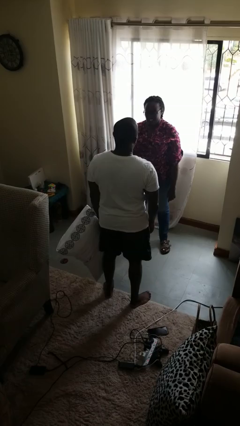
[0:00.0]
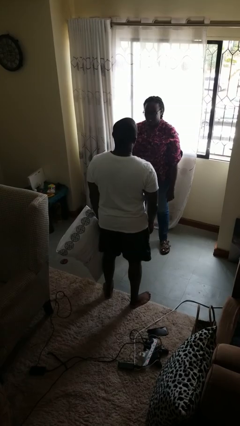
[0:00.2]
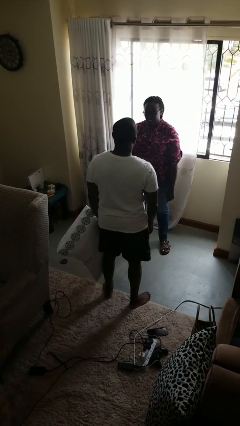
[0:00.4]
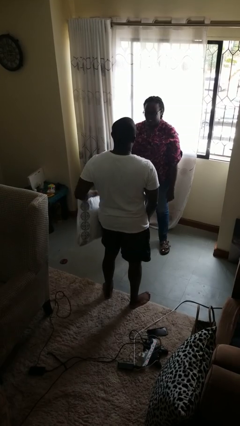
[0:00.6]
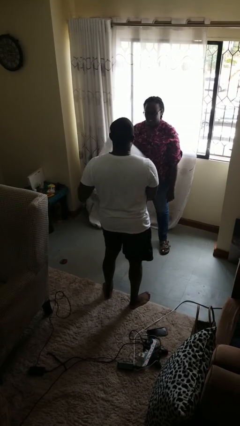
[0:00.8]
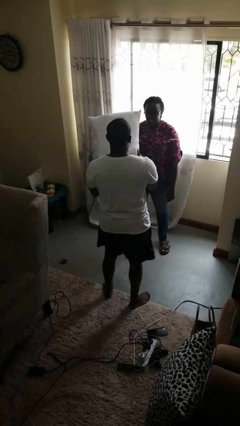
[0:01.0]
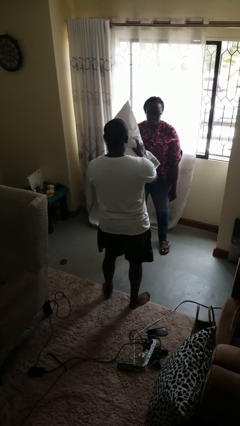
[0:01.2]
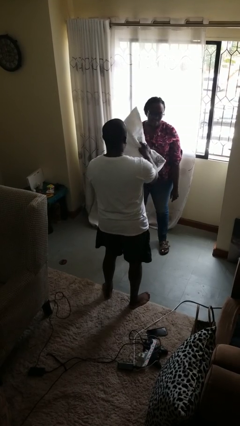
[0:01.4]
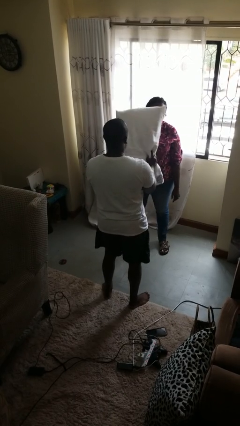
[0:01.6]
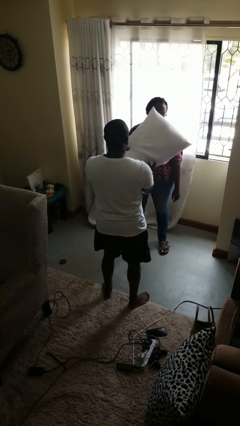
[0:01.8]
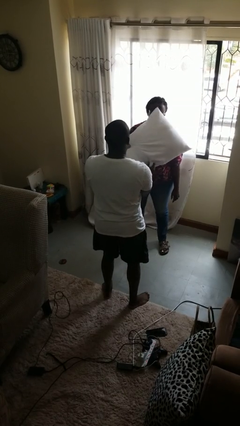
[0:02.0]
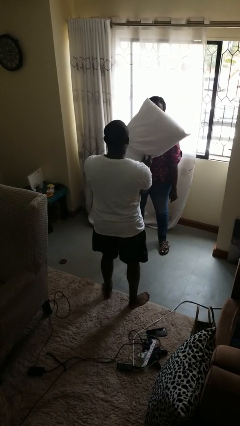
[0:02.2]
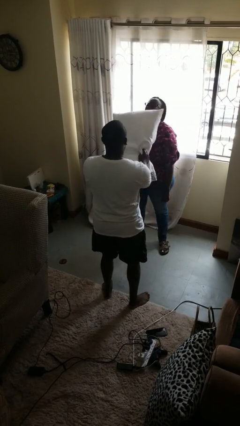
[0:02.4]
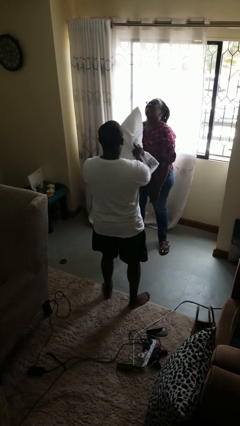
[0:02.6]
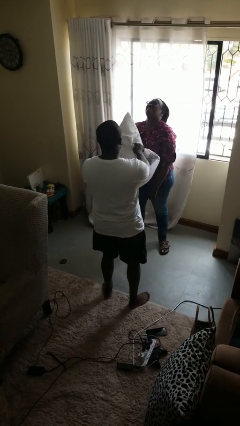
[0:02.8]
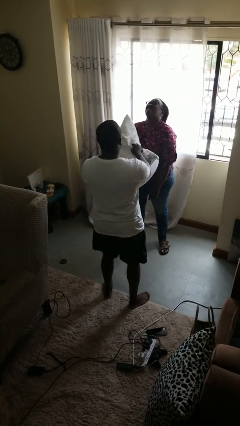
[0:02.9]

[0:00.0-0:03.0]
person hits person with pillow

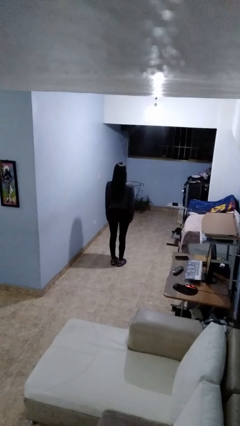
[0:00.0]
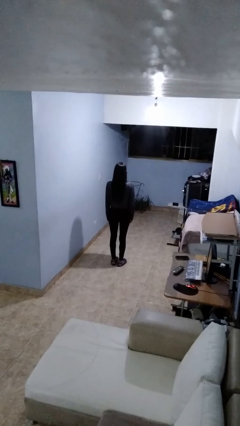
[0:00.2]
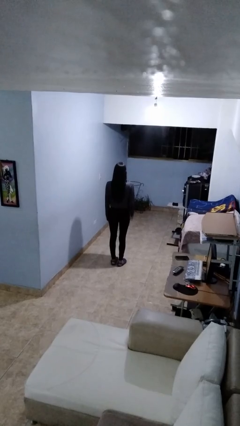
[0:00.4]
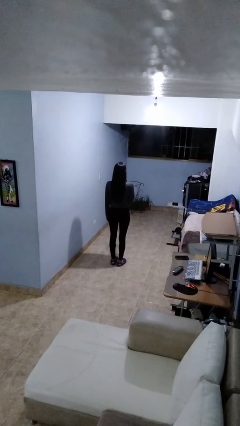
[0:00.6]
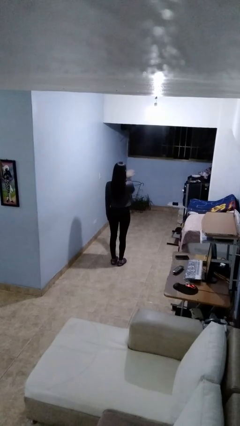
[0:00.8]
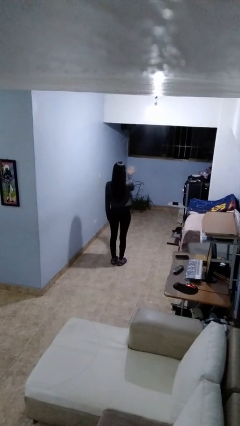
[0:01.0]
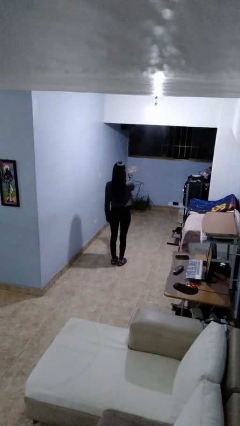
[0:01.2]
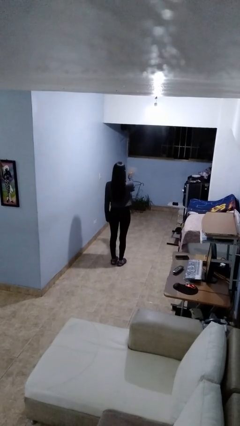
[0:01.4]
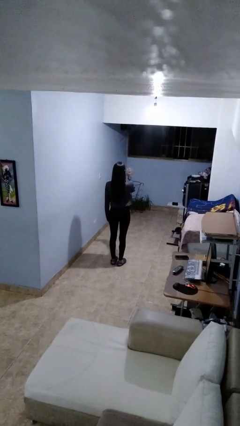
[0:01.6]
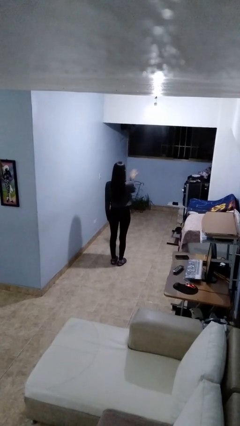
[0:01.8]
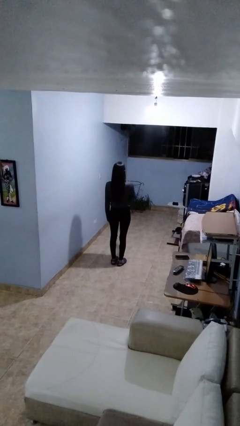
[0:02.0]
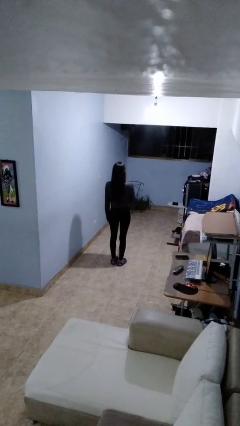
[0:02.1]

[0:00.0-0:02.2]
person salutes

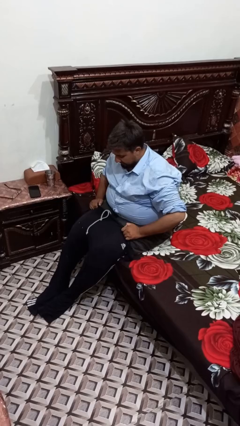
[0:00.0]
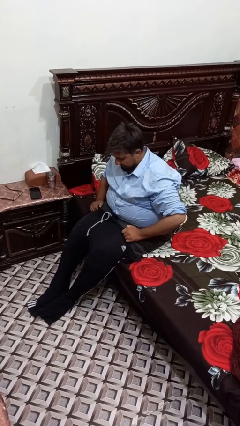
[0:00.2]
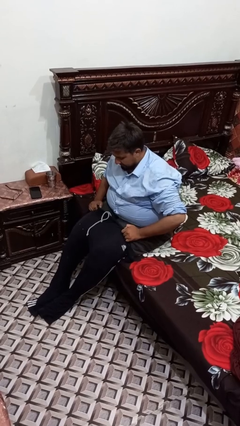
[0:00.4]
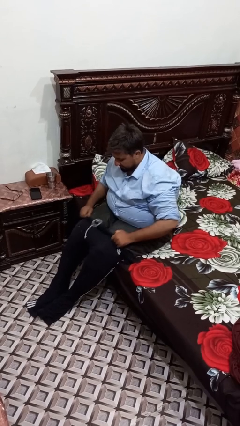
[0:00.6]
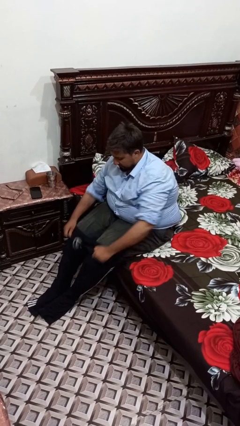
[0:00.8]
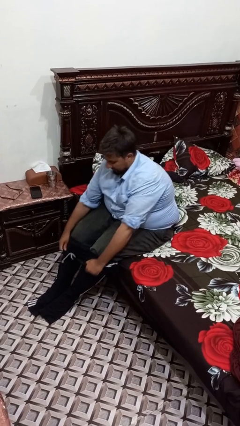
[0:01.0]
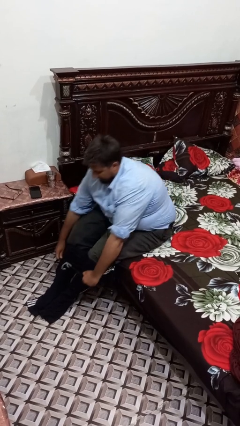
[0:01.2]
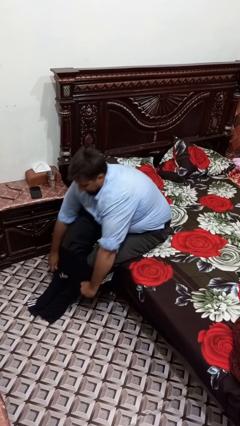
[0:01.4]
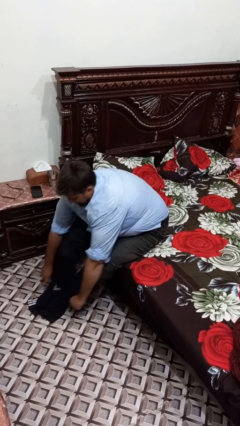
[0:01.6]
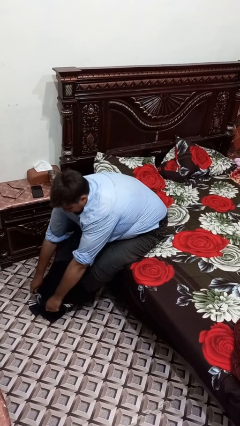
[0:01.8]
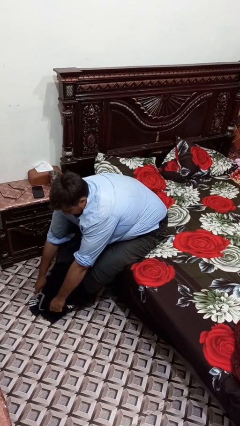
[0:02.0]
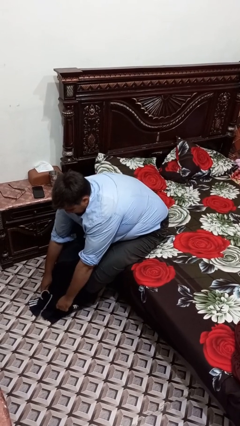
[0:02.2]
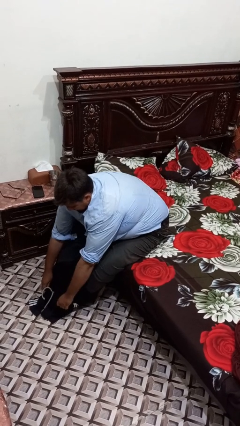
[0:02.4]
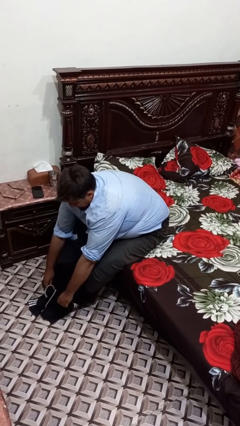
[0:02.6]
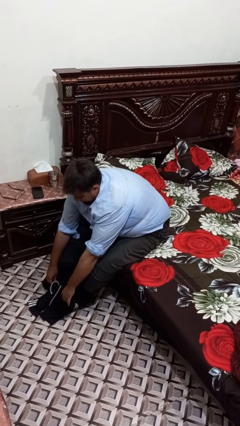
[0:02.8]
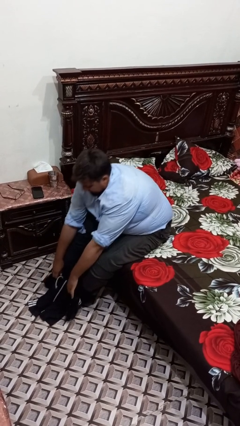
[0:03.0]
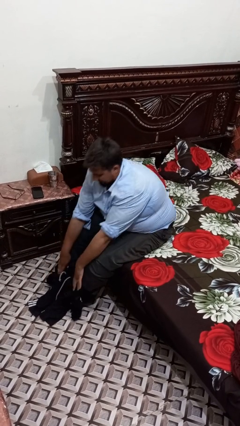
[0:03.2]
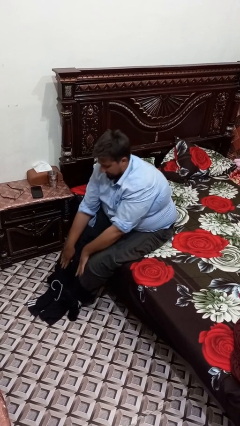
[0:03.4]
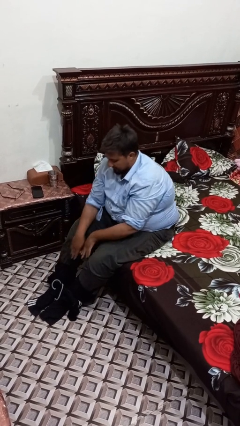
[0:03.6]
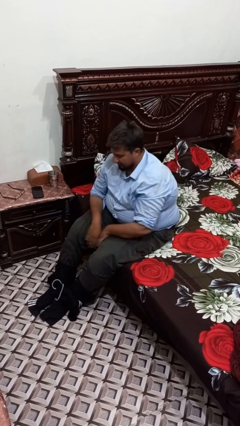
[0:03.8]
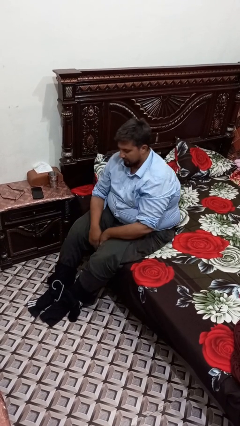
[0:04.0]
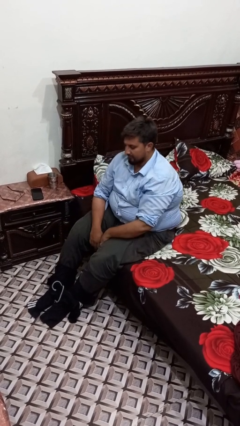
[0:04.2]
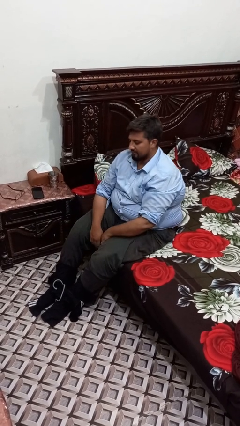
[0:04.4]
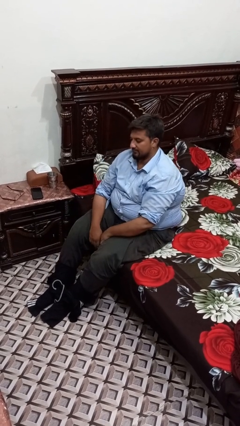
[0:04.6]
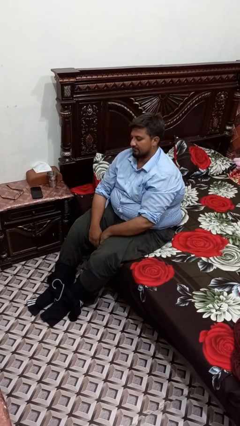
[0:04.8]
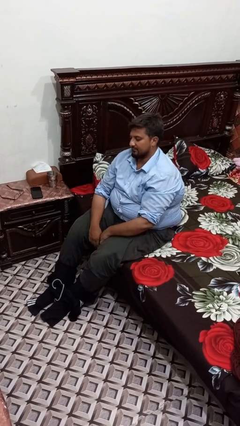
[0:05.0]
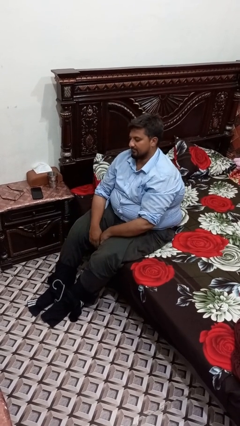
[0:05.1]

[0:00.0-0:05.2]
person takes off pants

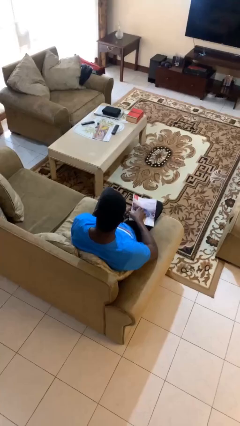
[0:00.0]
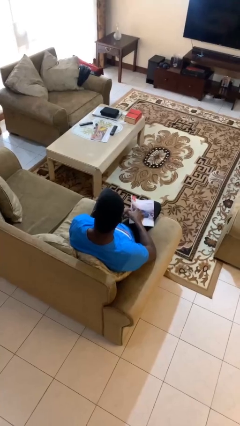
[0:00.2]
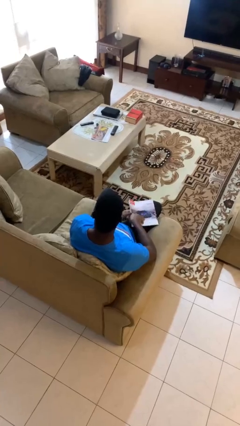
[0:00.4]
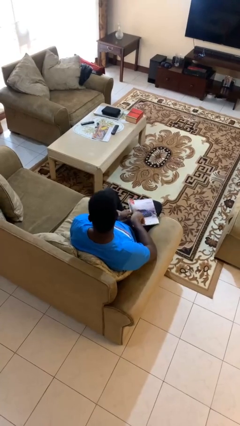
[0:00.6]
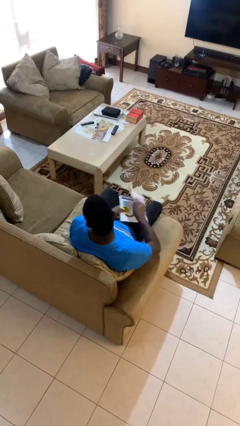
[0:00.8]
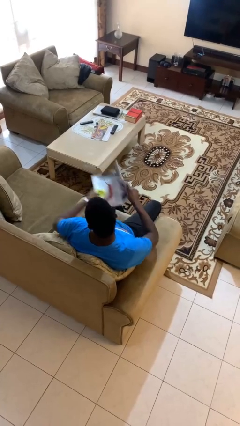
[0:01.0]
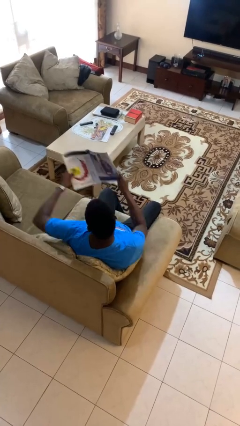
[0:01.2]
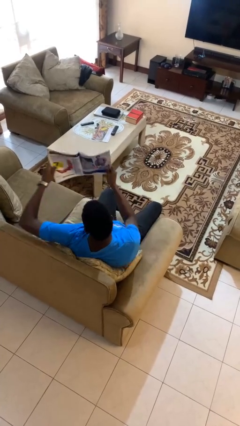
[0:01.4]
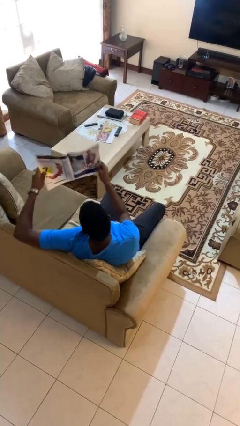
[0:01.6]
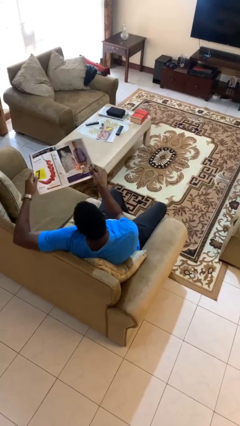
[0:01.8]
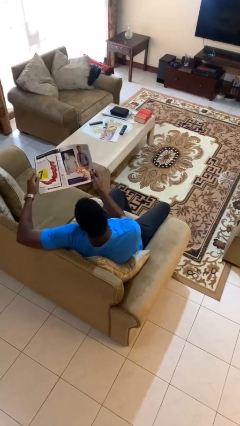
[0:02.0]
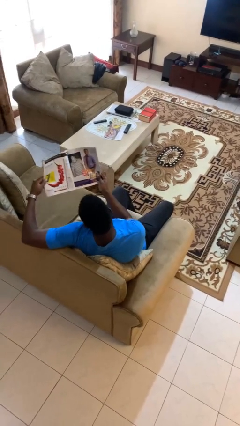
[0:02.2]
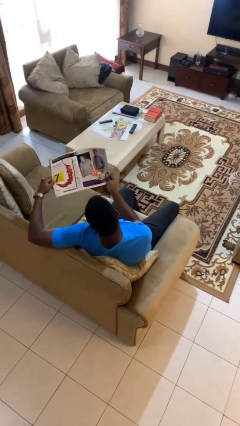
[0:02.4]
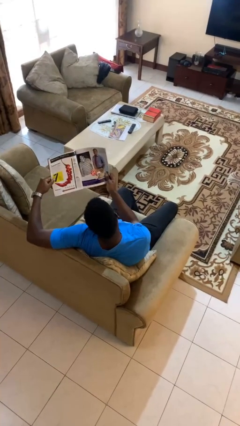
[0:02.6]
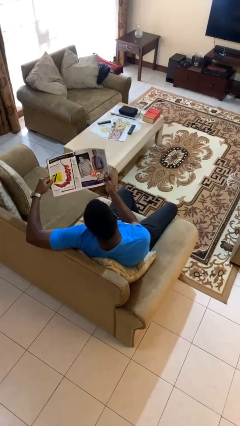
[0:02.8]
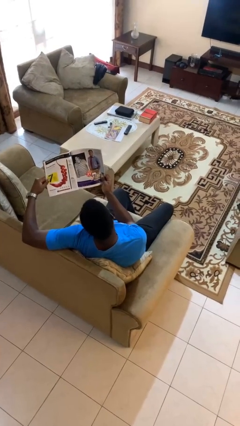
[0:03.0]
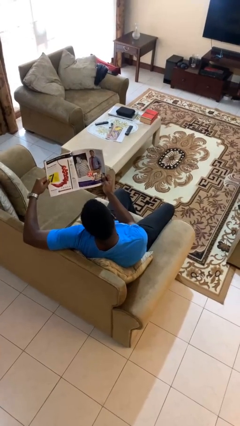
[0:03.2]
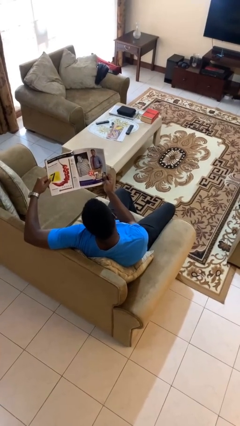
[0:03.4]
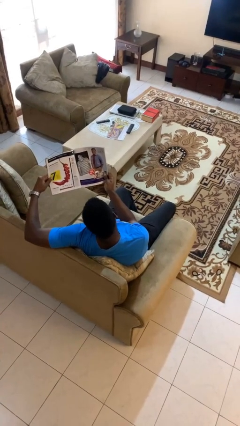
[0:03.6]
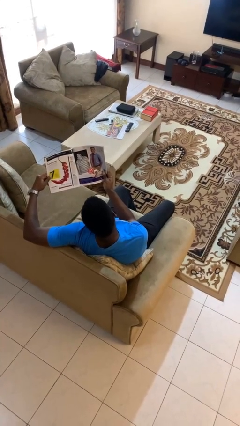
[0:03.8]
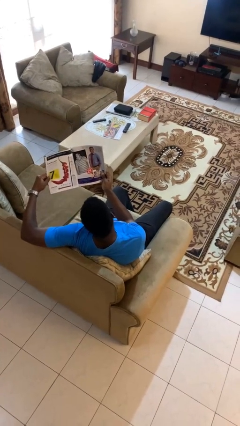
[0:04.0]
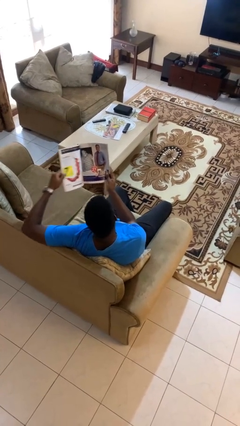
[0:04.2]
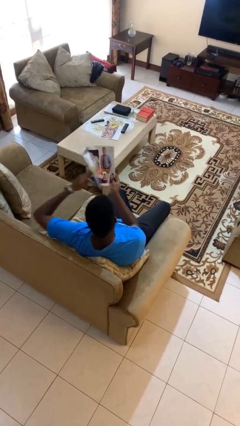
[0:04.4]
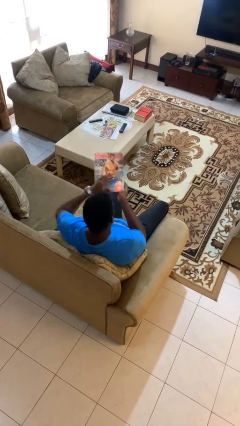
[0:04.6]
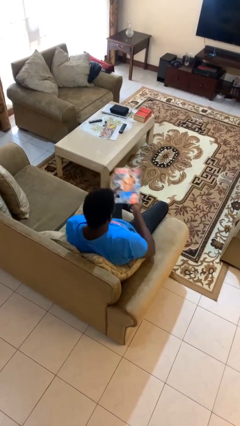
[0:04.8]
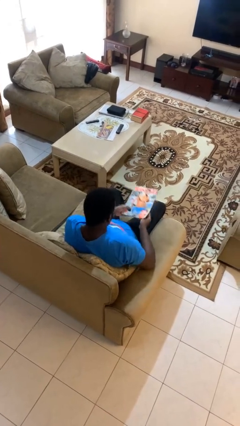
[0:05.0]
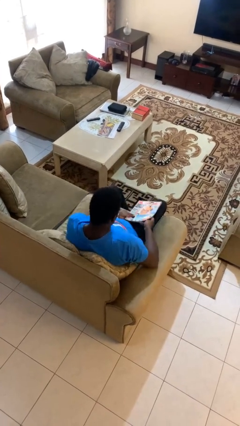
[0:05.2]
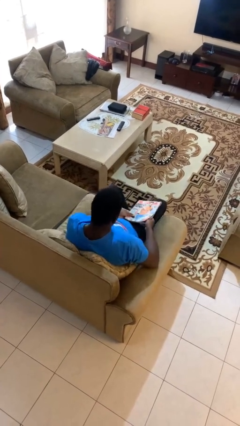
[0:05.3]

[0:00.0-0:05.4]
person reads magazine

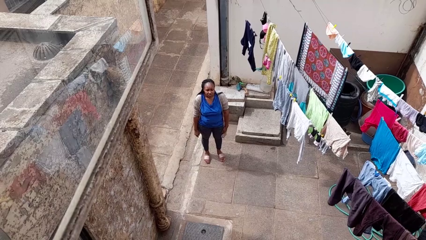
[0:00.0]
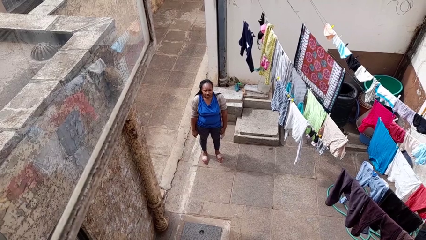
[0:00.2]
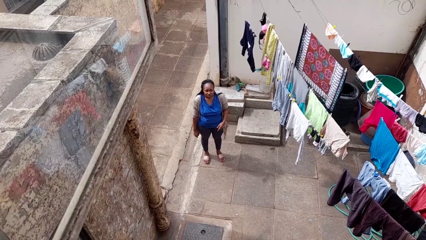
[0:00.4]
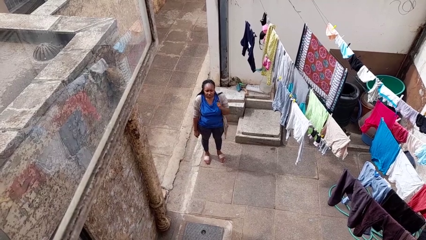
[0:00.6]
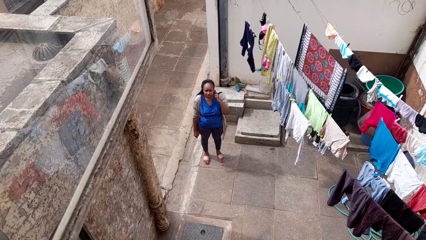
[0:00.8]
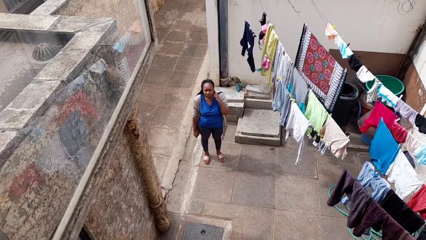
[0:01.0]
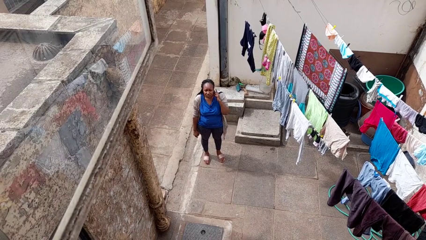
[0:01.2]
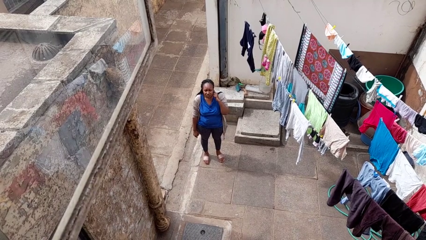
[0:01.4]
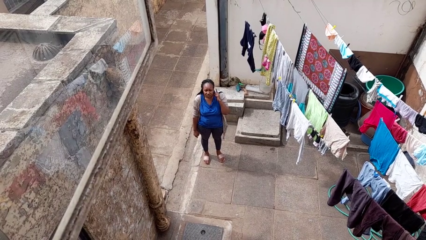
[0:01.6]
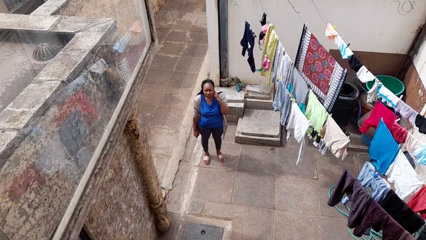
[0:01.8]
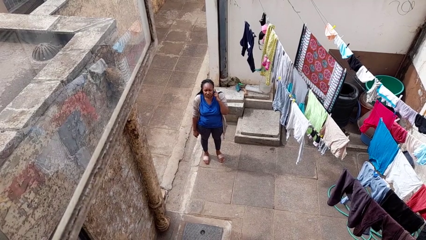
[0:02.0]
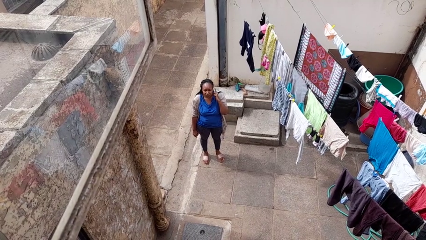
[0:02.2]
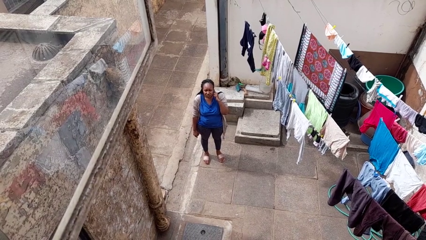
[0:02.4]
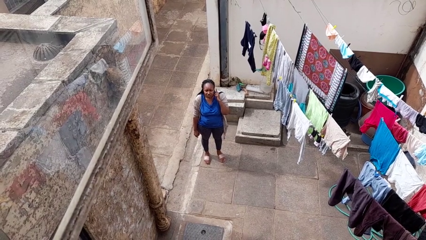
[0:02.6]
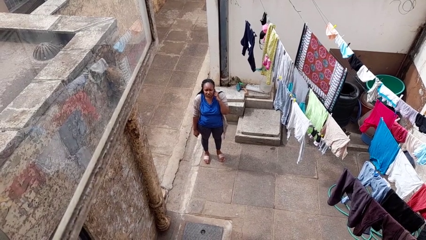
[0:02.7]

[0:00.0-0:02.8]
person gestures listen closely
